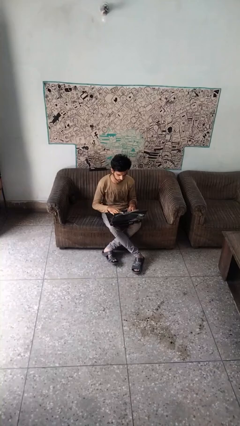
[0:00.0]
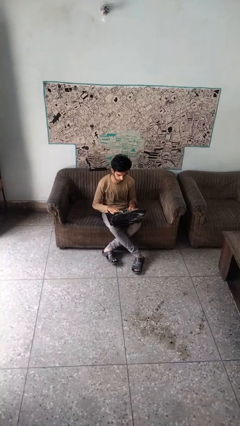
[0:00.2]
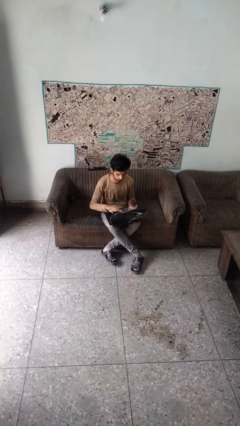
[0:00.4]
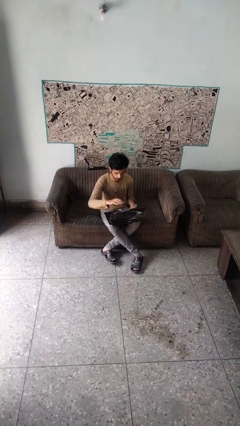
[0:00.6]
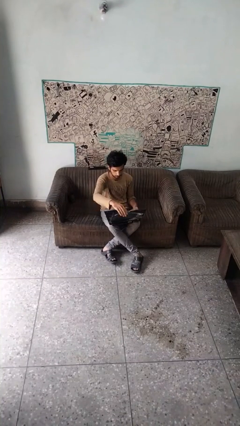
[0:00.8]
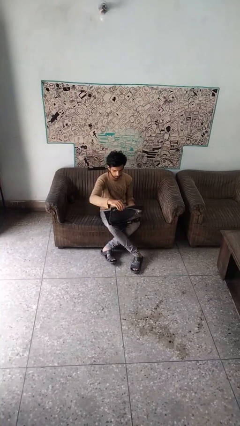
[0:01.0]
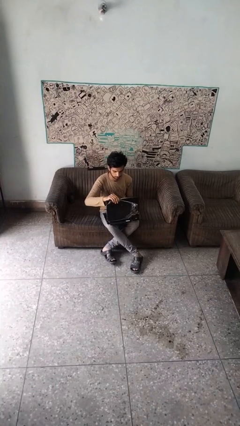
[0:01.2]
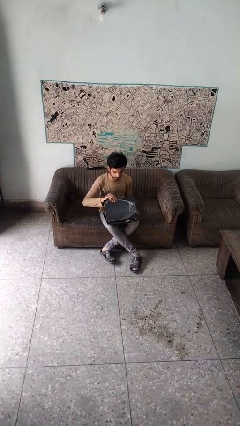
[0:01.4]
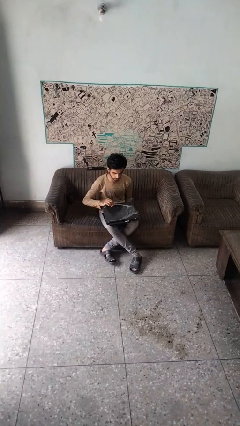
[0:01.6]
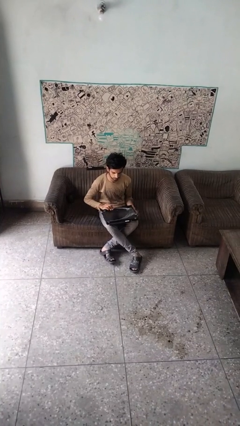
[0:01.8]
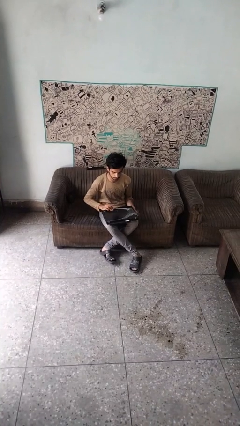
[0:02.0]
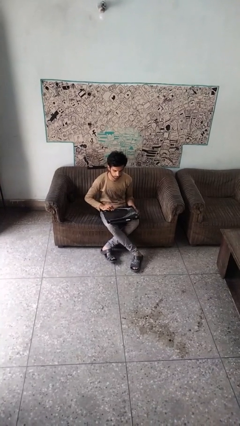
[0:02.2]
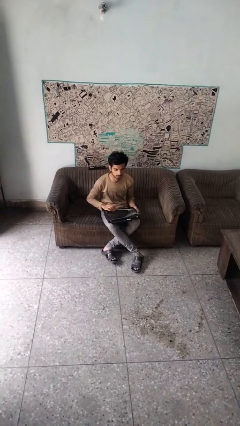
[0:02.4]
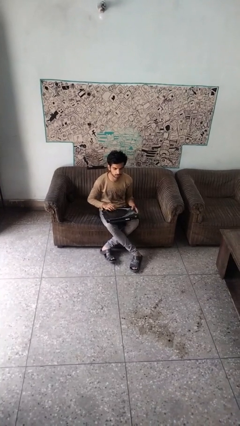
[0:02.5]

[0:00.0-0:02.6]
person closes laptop

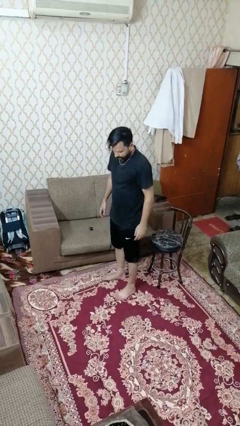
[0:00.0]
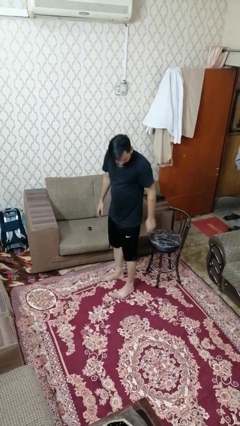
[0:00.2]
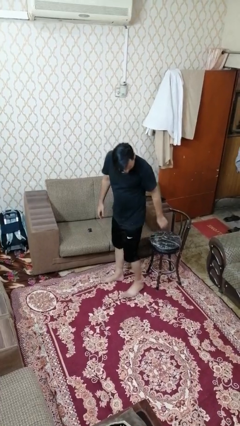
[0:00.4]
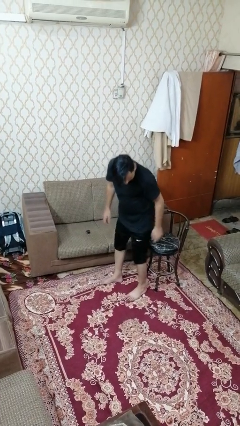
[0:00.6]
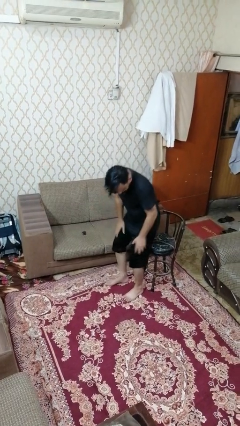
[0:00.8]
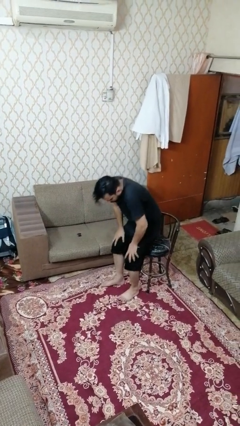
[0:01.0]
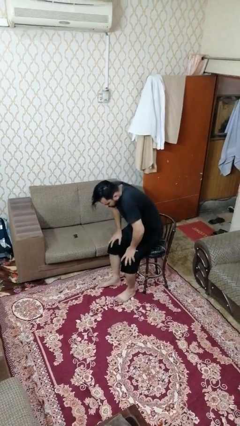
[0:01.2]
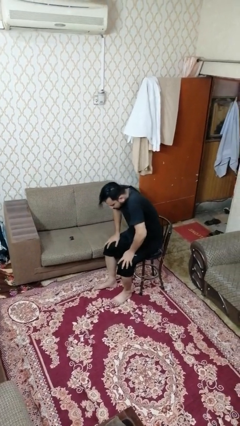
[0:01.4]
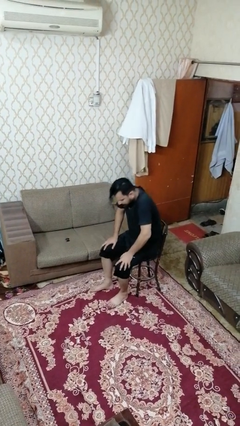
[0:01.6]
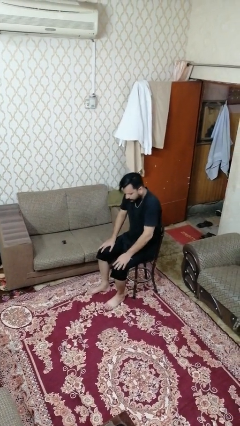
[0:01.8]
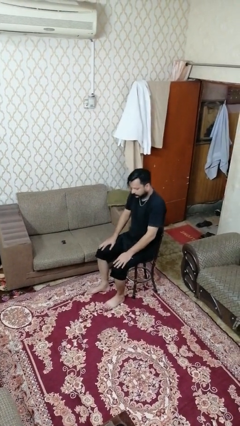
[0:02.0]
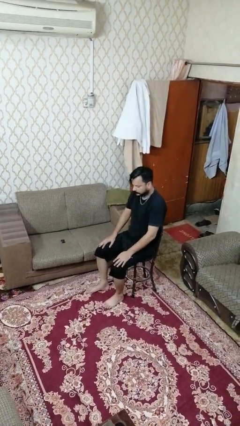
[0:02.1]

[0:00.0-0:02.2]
person sits down

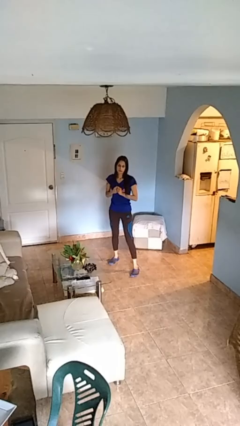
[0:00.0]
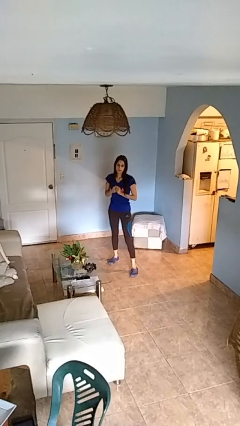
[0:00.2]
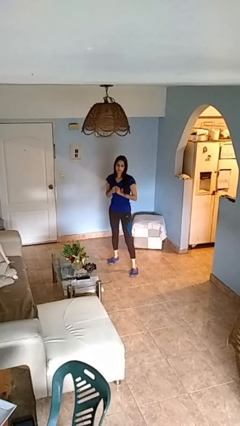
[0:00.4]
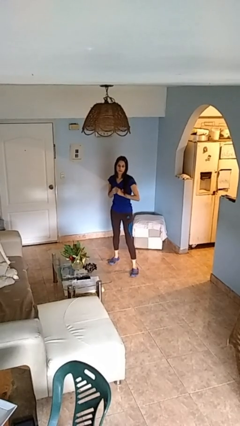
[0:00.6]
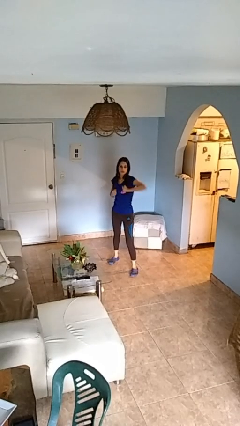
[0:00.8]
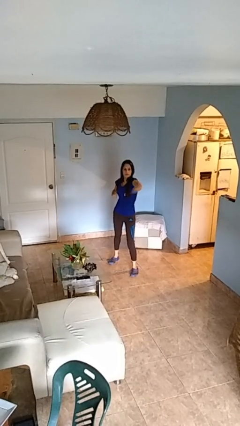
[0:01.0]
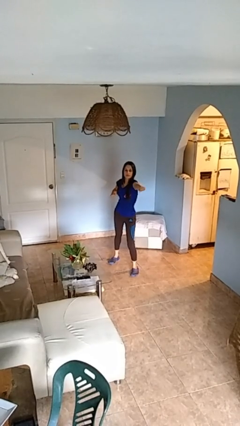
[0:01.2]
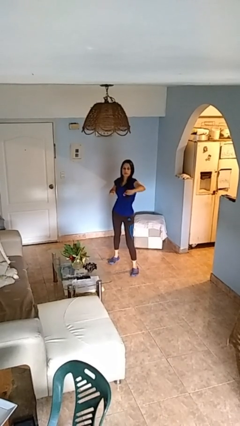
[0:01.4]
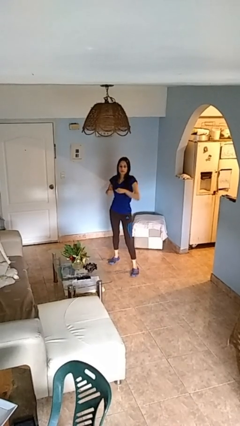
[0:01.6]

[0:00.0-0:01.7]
person karate chop

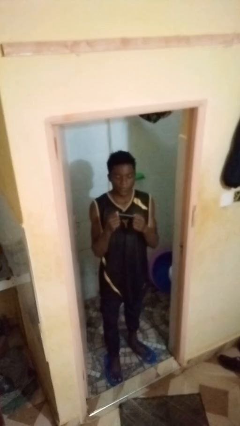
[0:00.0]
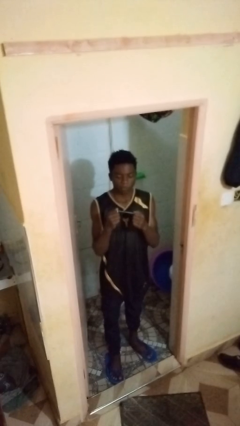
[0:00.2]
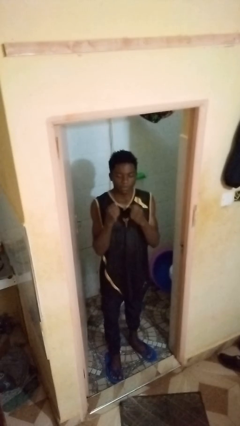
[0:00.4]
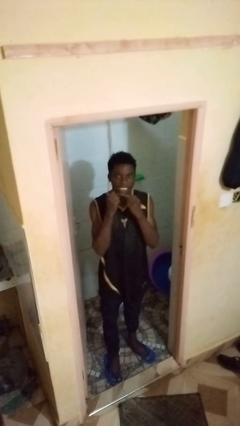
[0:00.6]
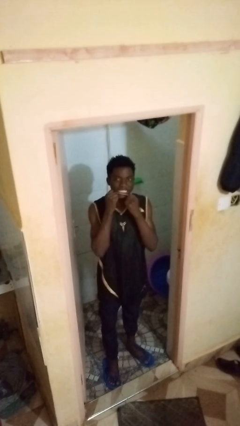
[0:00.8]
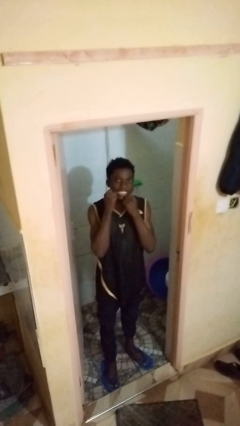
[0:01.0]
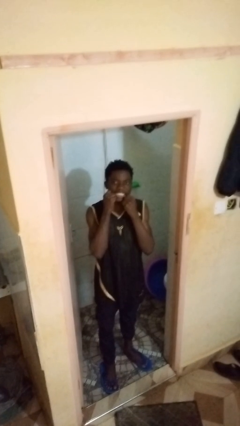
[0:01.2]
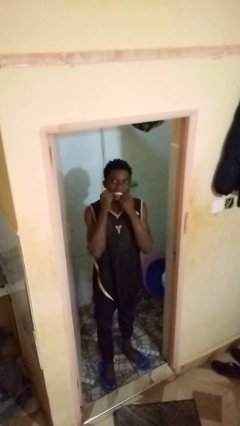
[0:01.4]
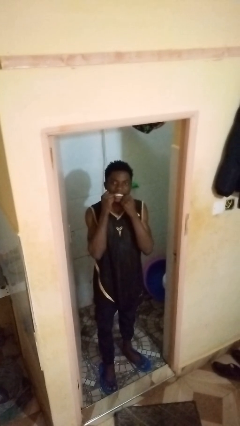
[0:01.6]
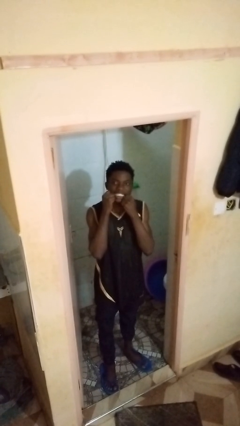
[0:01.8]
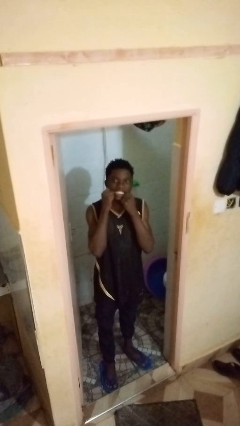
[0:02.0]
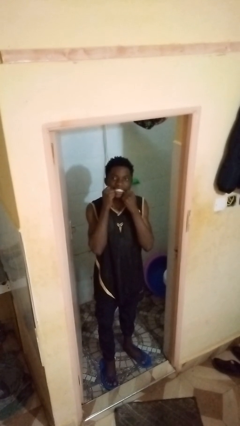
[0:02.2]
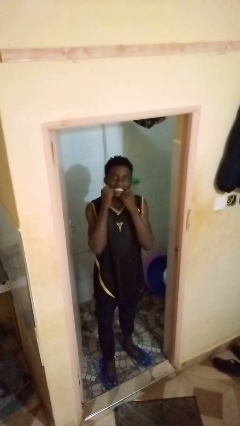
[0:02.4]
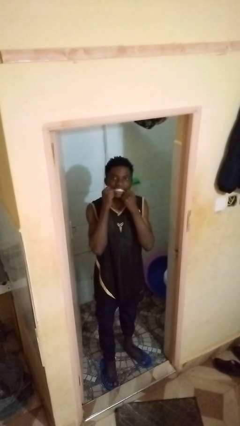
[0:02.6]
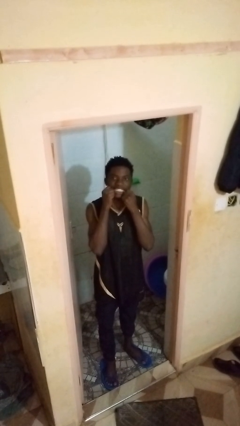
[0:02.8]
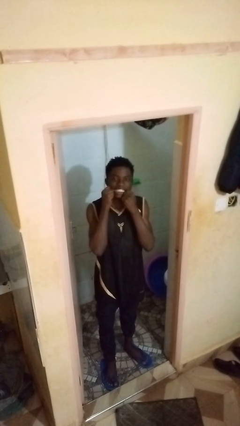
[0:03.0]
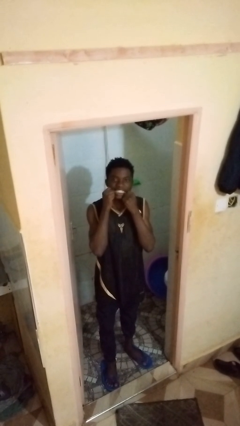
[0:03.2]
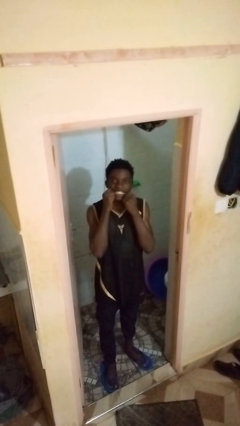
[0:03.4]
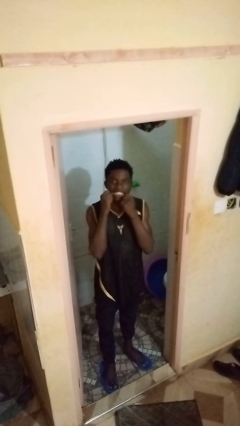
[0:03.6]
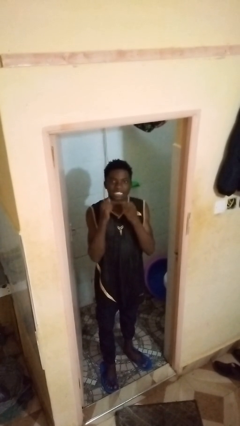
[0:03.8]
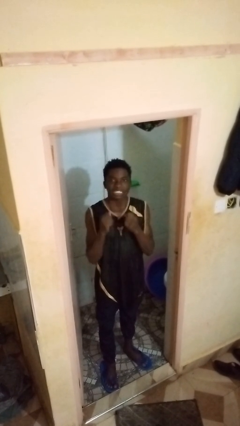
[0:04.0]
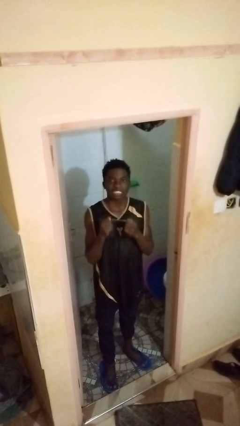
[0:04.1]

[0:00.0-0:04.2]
person flosses

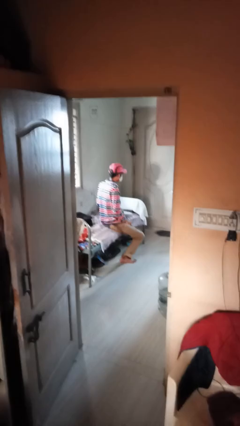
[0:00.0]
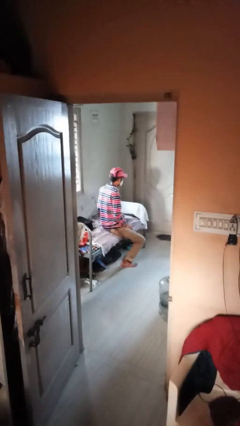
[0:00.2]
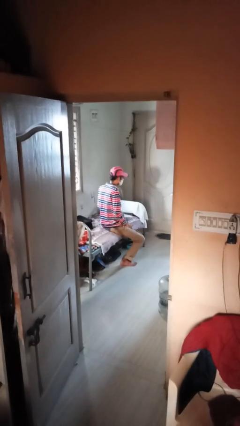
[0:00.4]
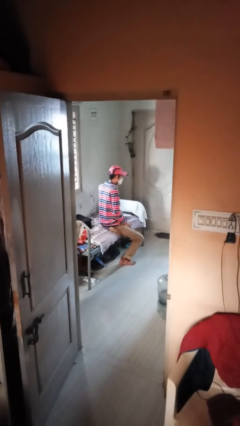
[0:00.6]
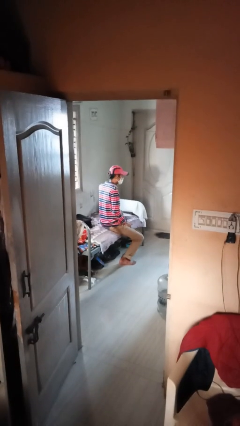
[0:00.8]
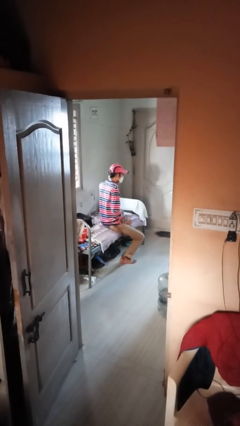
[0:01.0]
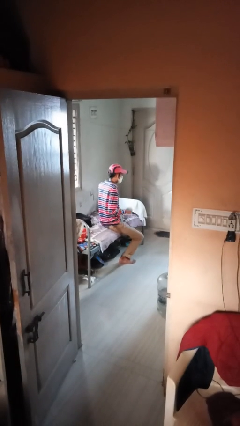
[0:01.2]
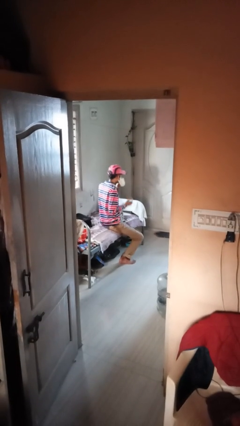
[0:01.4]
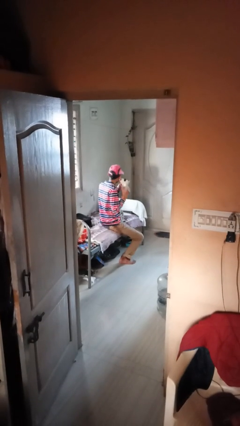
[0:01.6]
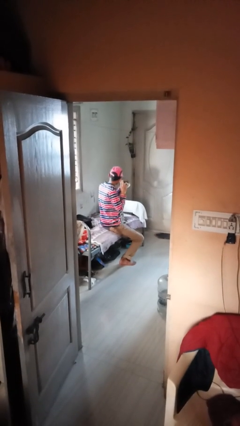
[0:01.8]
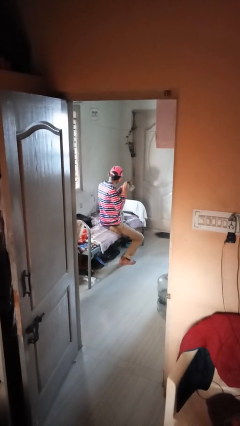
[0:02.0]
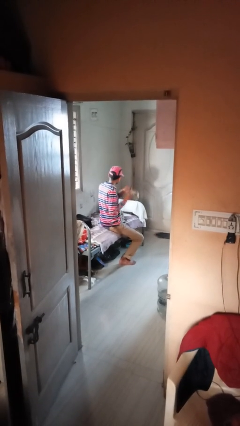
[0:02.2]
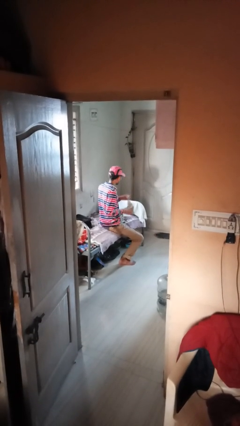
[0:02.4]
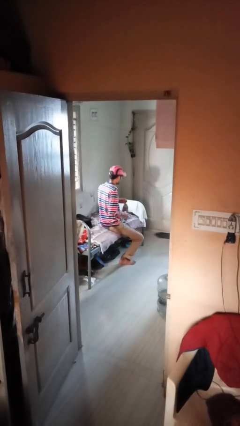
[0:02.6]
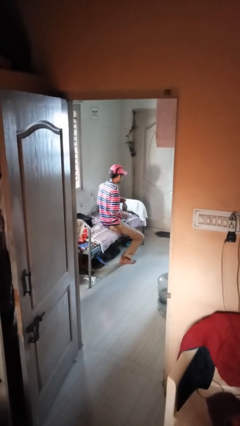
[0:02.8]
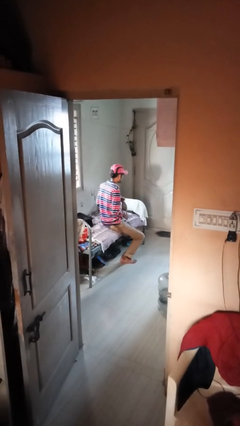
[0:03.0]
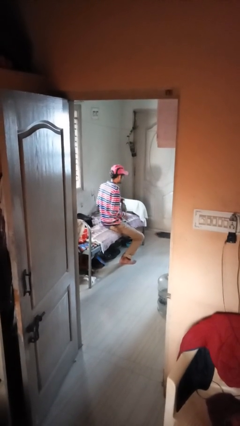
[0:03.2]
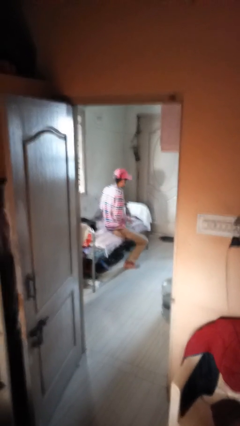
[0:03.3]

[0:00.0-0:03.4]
person takes off facemask

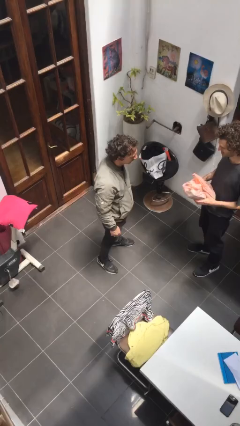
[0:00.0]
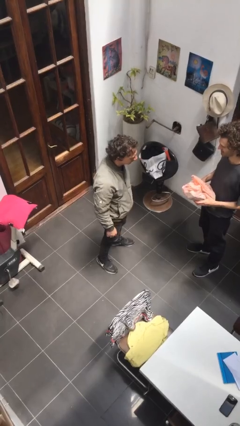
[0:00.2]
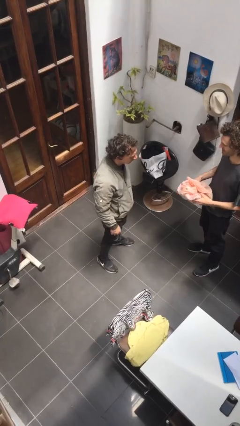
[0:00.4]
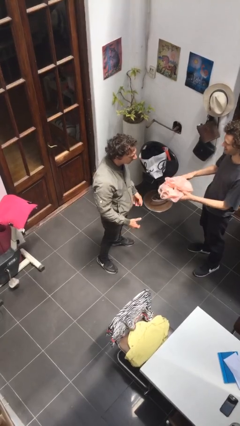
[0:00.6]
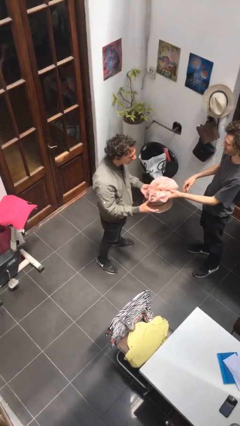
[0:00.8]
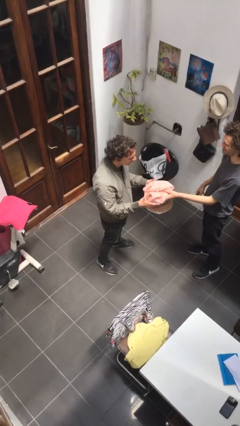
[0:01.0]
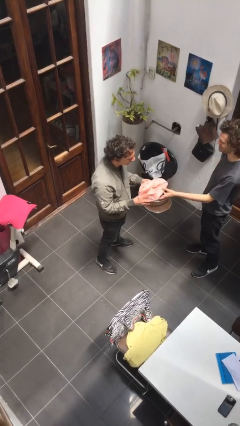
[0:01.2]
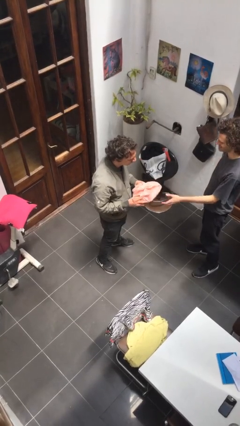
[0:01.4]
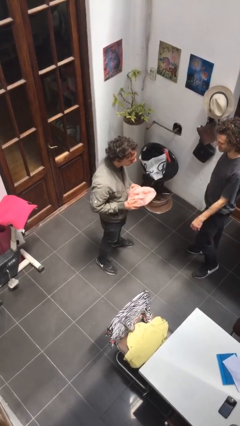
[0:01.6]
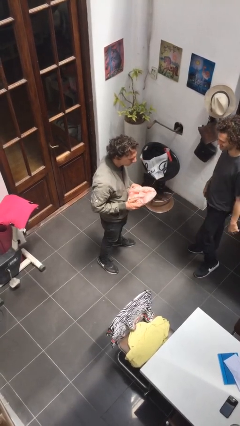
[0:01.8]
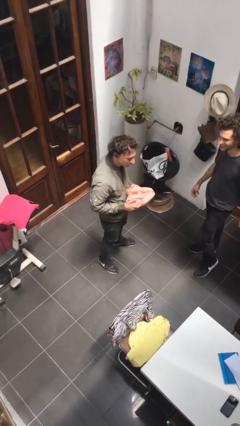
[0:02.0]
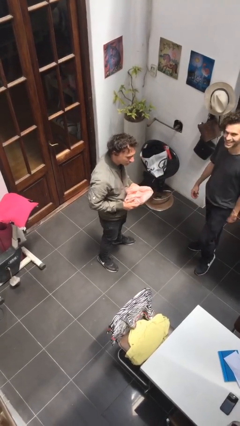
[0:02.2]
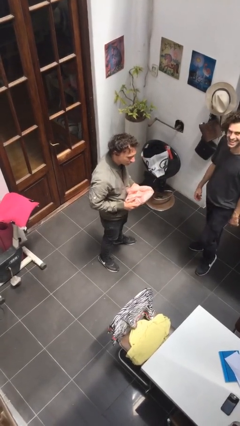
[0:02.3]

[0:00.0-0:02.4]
person transfers object to person

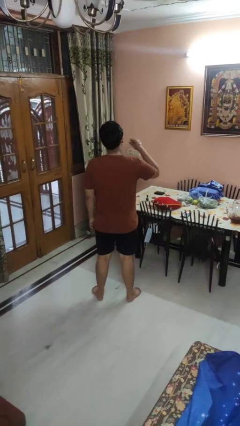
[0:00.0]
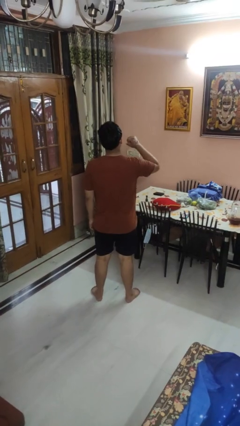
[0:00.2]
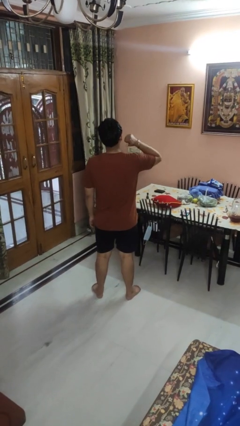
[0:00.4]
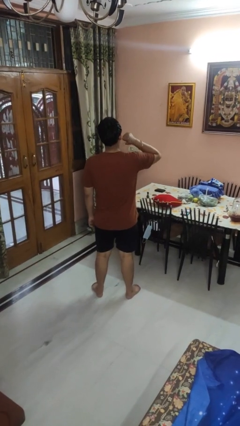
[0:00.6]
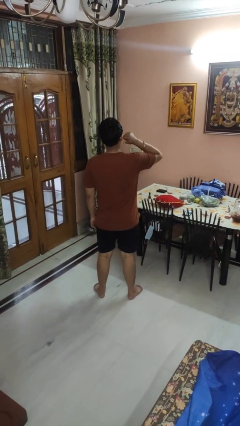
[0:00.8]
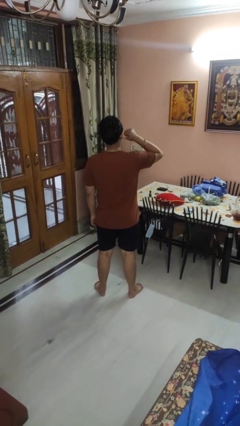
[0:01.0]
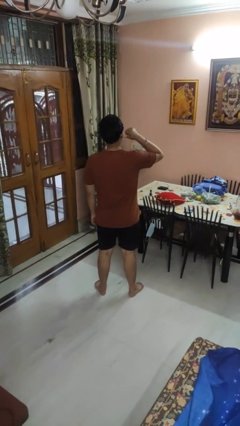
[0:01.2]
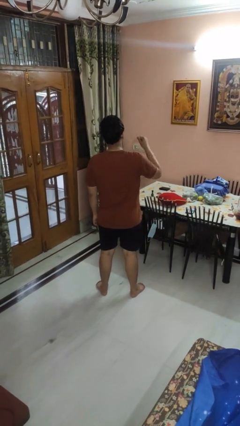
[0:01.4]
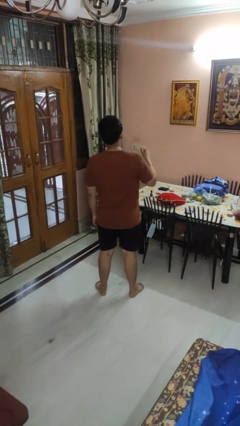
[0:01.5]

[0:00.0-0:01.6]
person gestures behind me
